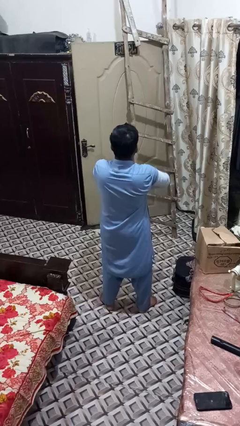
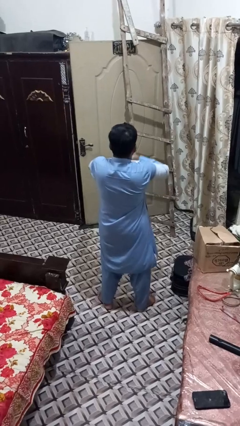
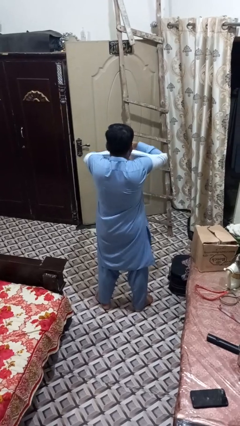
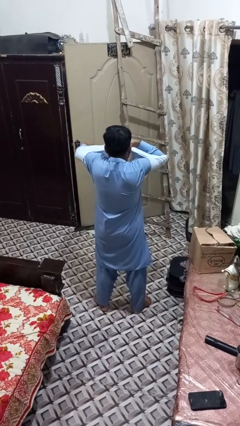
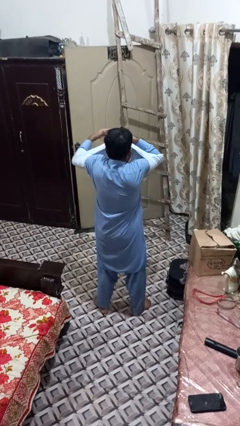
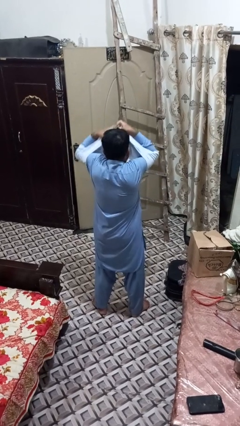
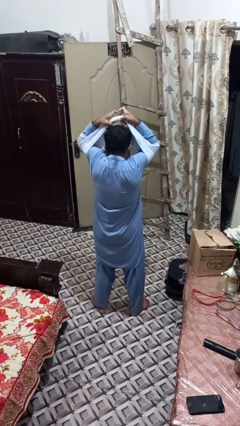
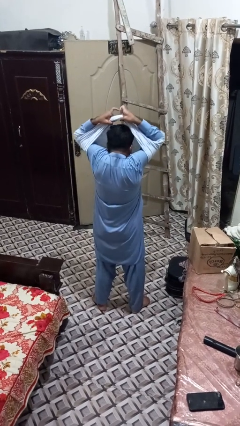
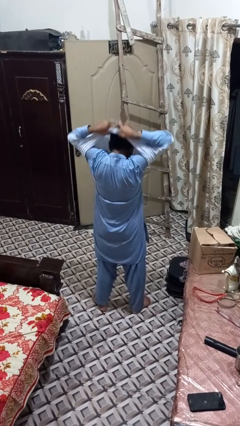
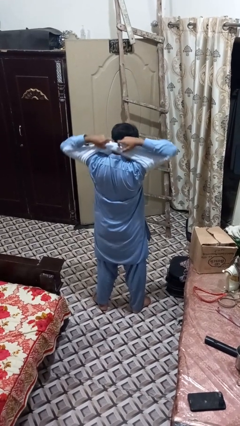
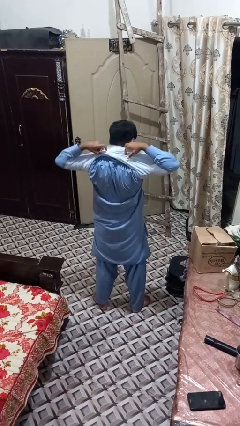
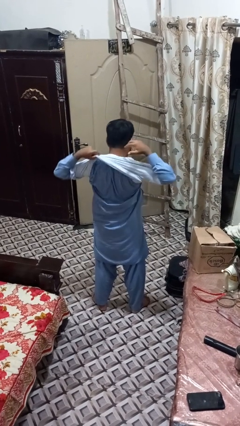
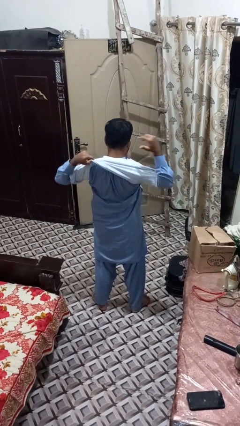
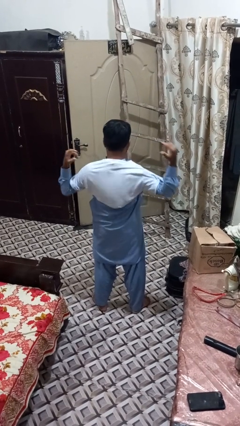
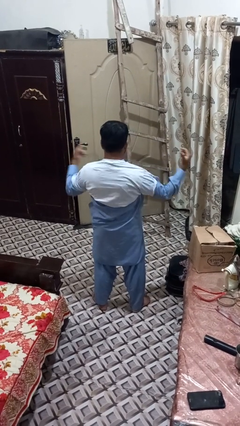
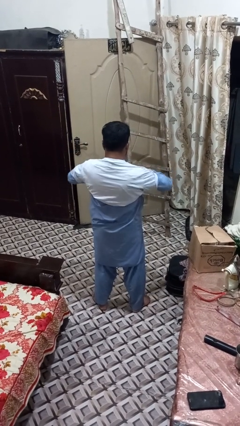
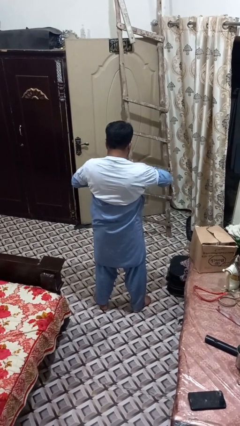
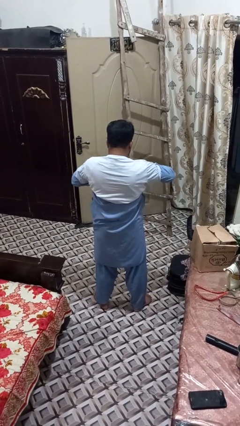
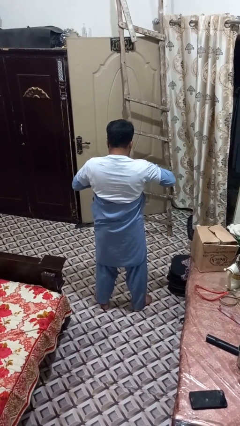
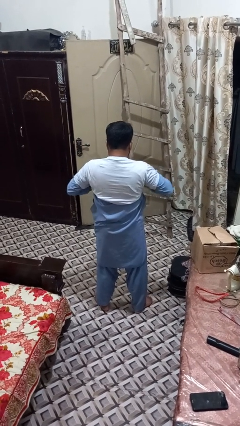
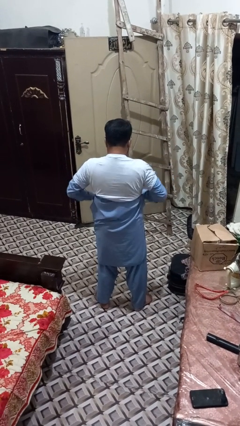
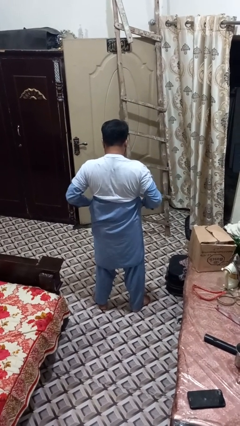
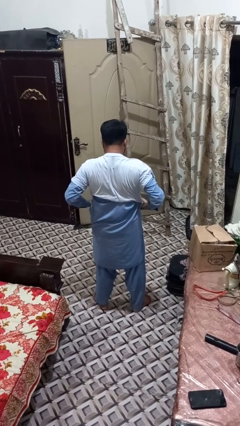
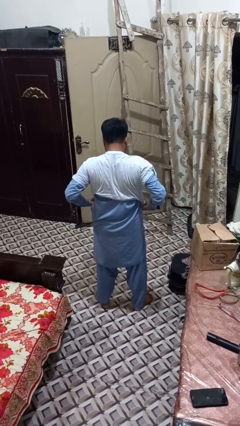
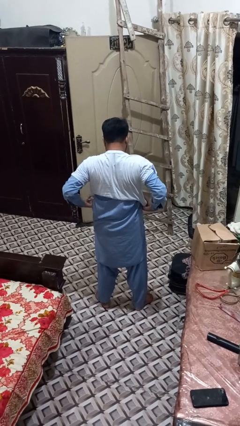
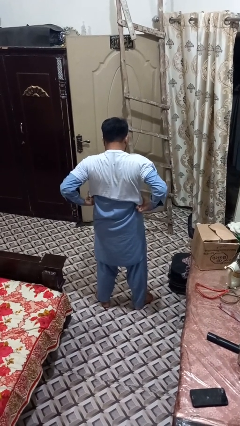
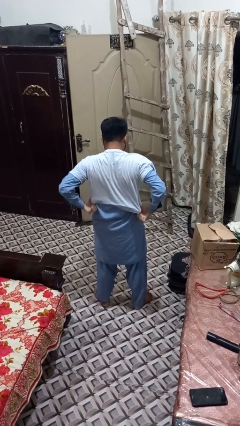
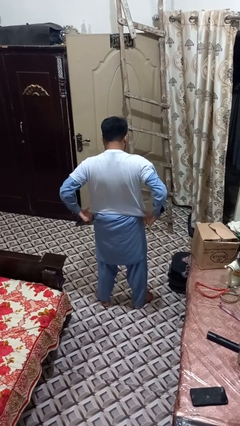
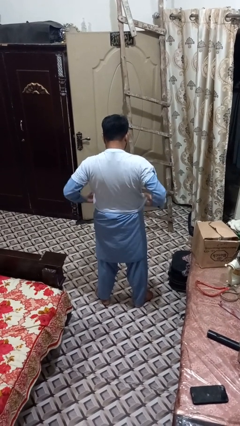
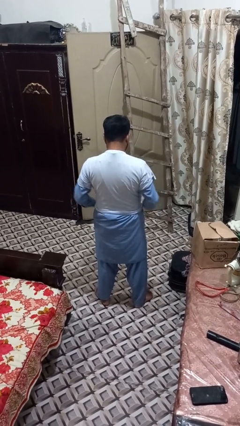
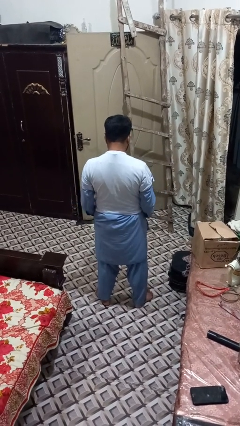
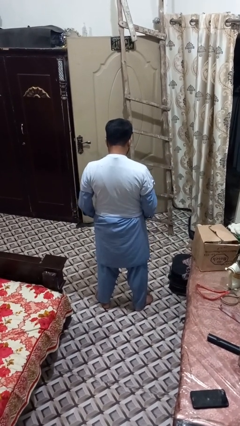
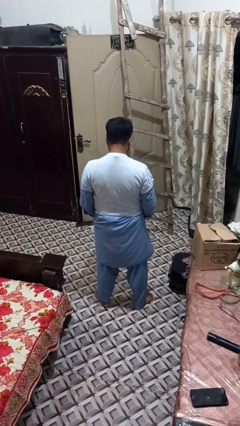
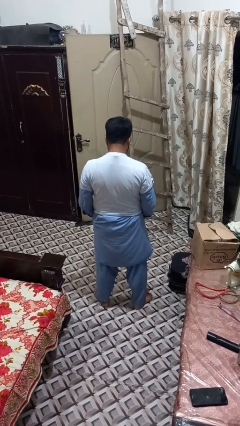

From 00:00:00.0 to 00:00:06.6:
person puts on shirt

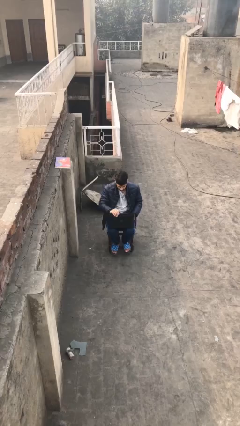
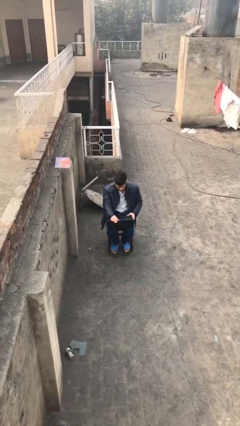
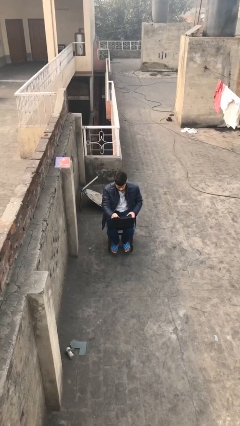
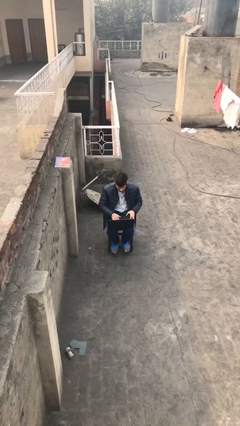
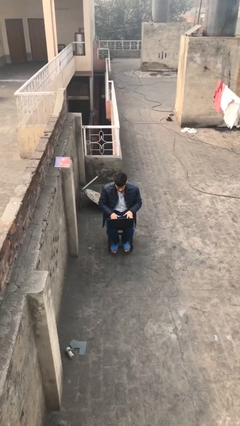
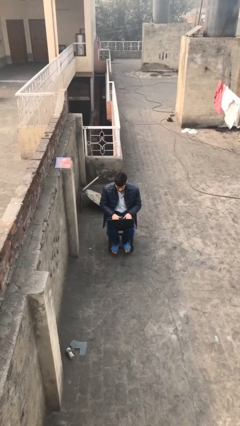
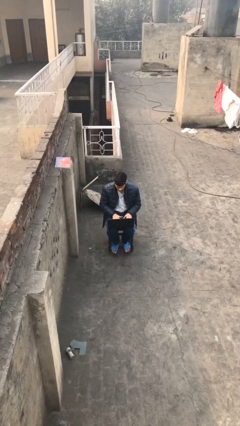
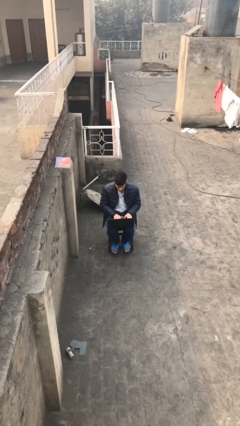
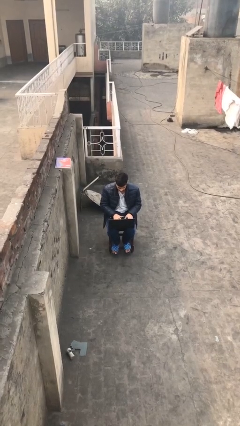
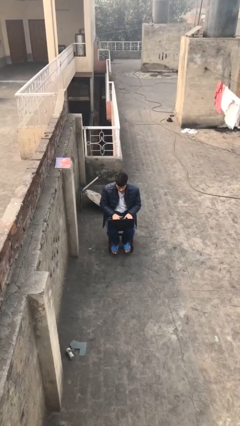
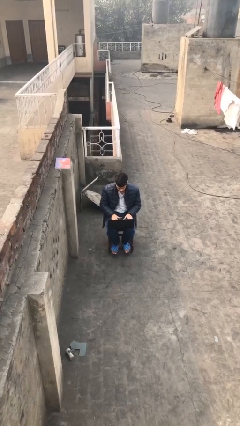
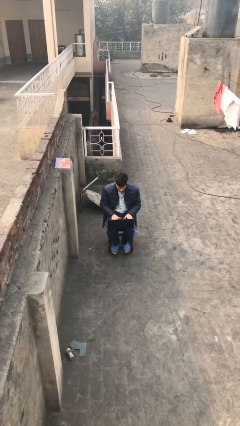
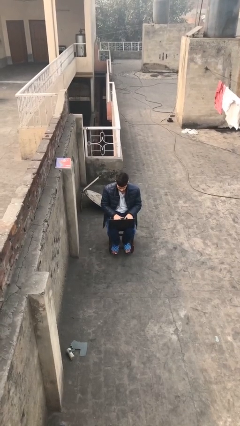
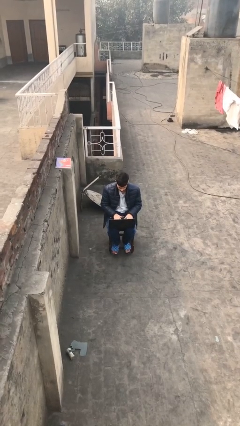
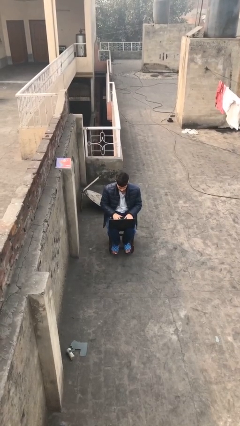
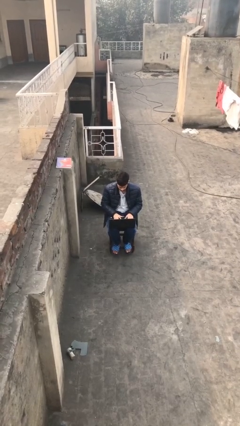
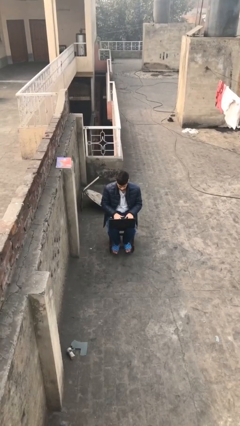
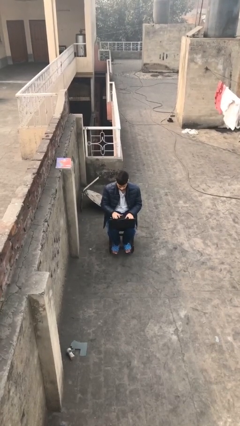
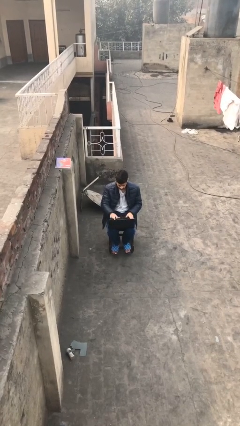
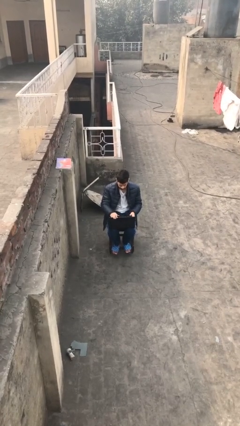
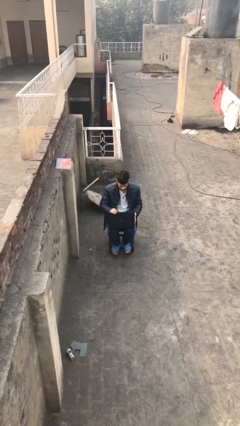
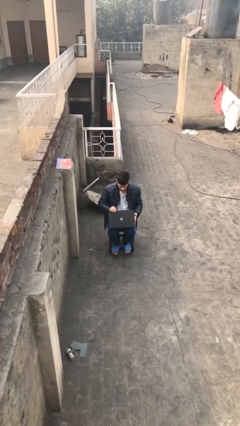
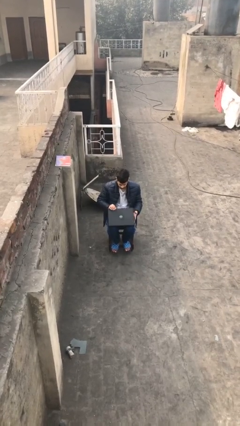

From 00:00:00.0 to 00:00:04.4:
person interacts with laptop

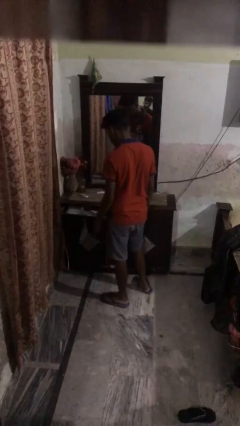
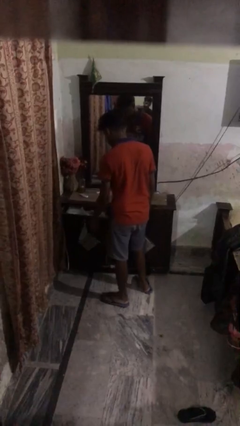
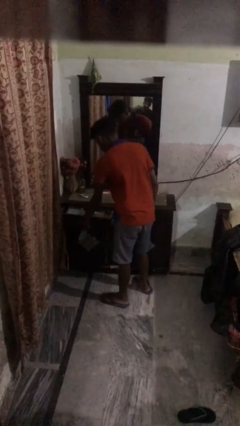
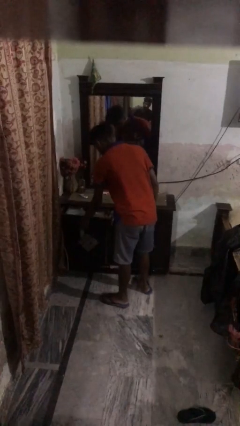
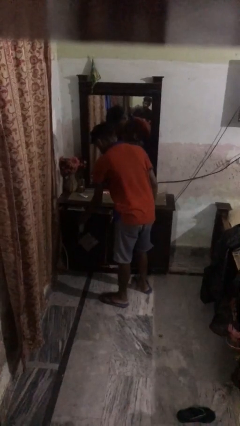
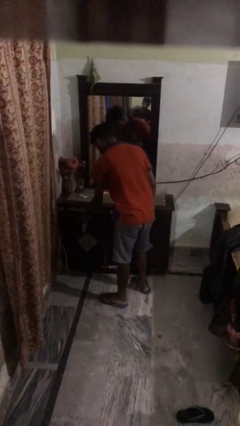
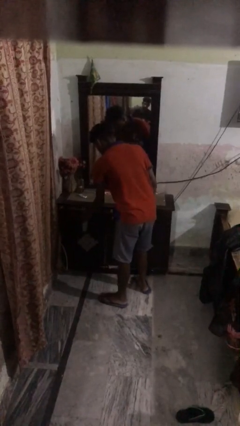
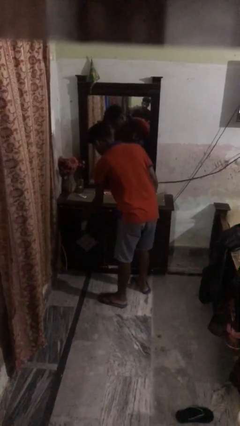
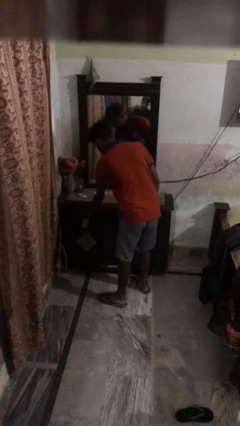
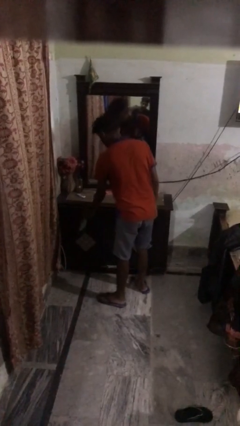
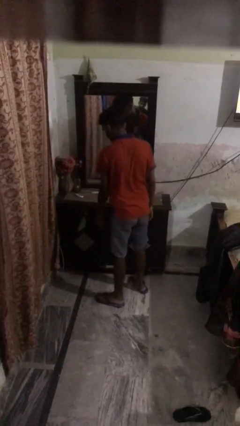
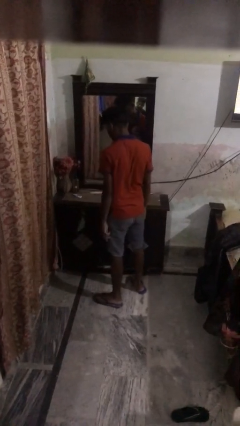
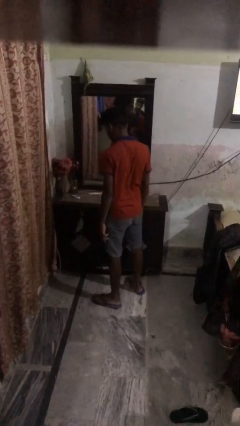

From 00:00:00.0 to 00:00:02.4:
person closes dresser drawer

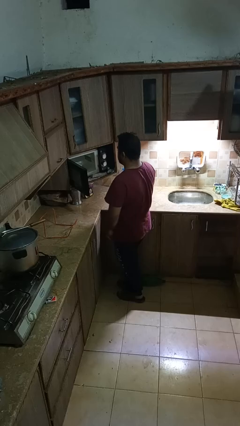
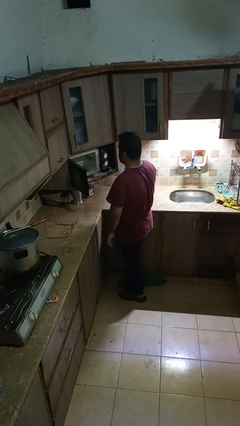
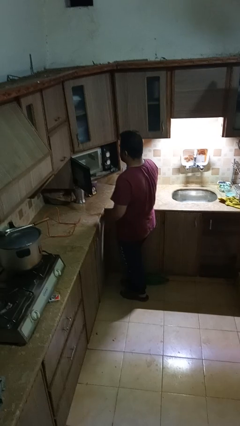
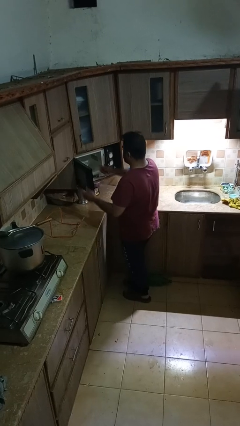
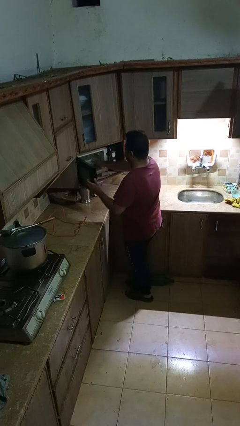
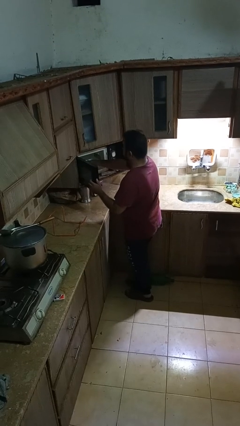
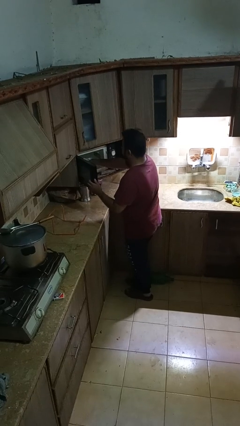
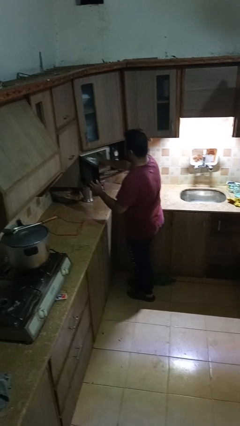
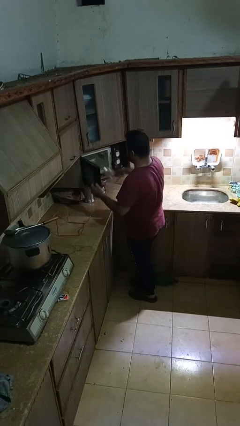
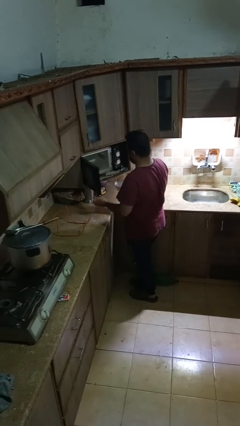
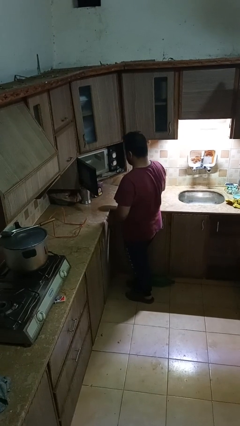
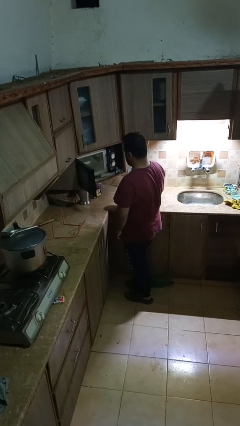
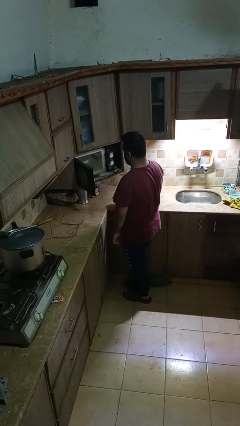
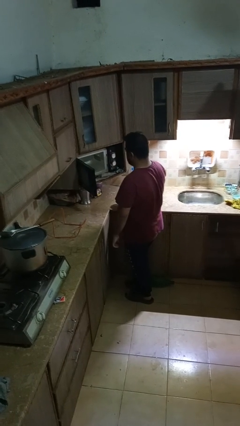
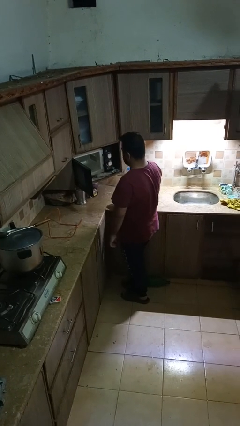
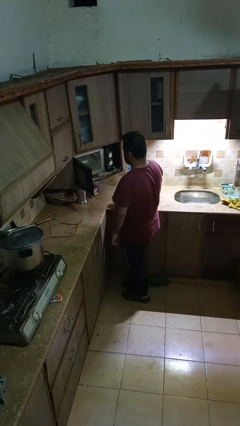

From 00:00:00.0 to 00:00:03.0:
person takes object from microwave

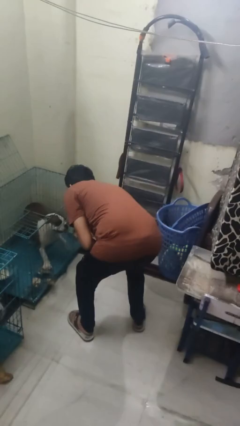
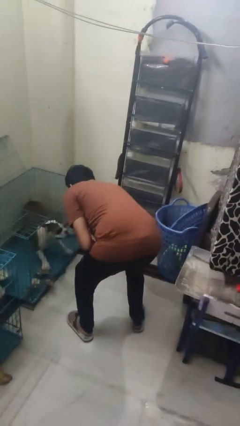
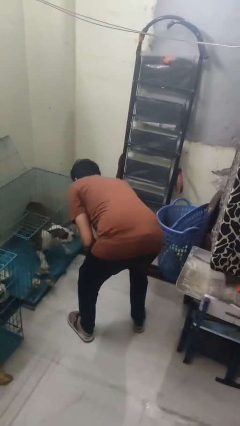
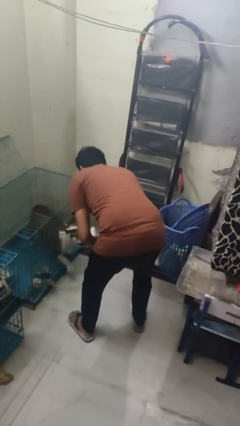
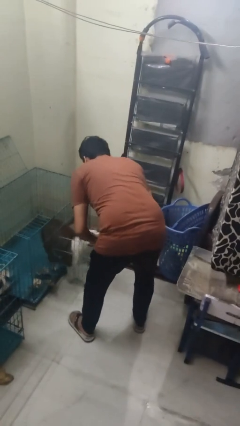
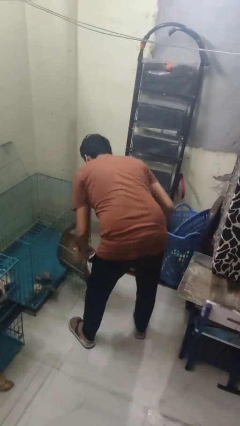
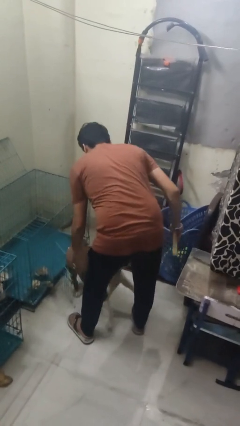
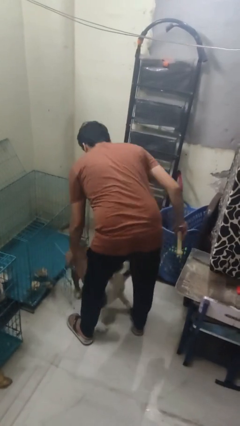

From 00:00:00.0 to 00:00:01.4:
person uncrates dog

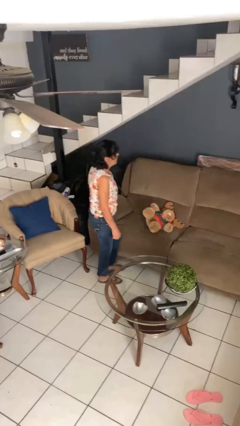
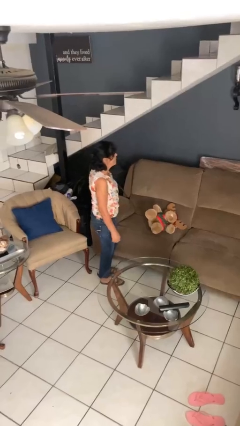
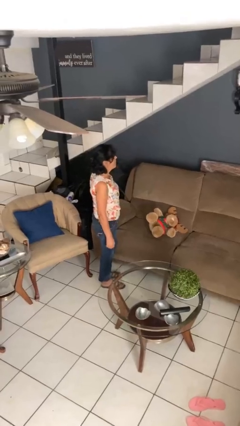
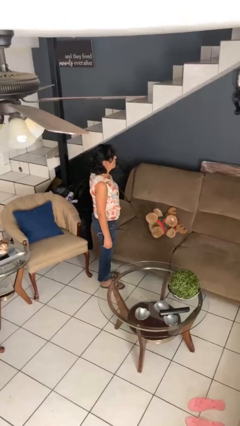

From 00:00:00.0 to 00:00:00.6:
person puts down object on couch
